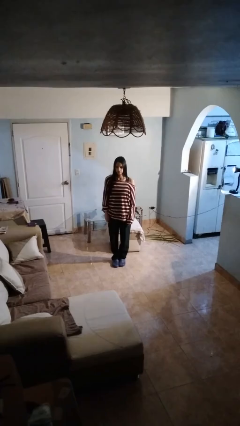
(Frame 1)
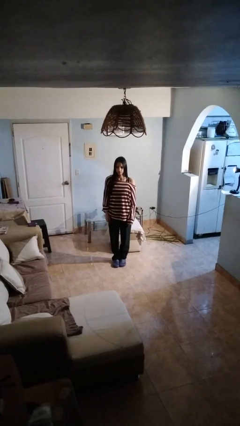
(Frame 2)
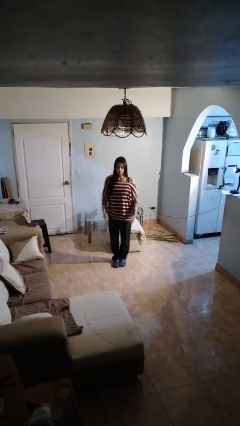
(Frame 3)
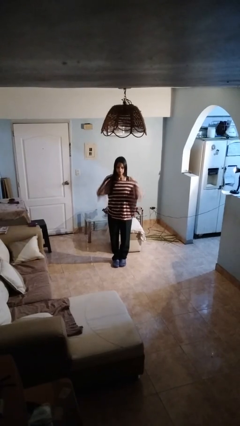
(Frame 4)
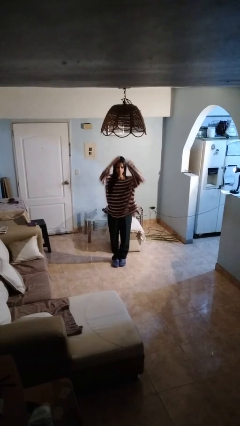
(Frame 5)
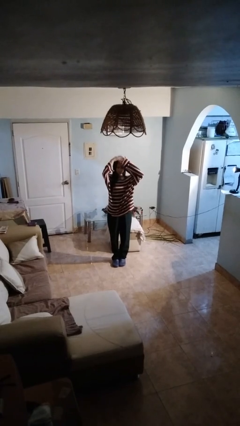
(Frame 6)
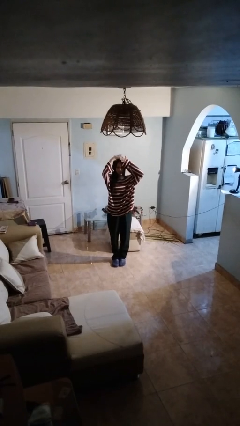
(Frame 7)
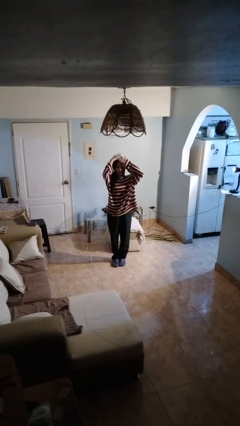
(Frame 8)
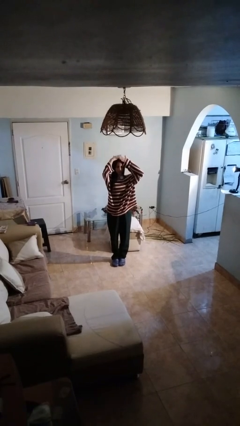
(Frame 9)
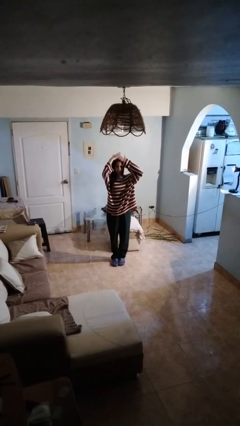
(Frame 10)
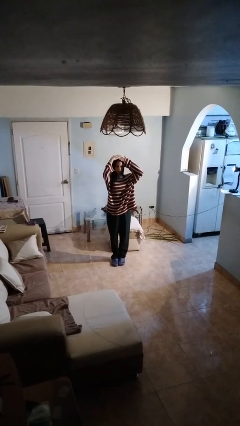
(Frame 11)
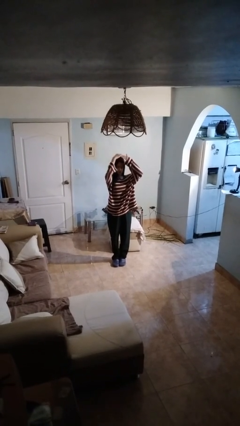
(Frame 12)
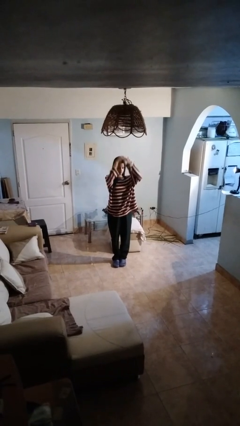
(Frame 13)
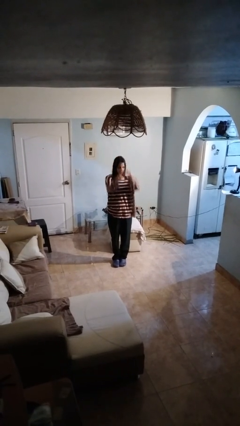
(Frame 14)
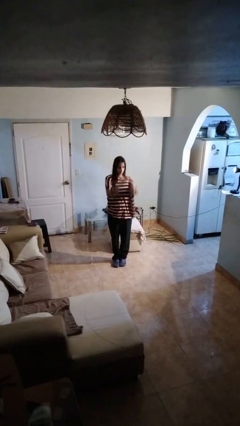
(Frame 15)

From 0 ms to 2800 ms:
person pats head

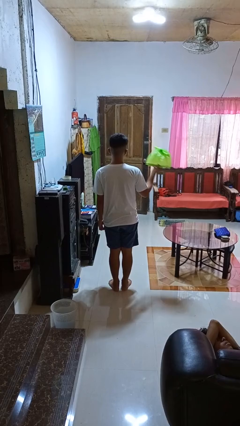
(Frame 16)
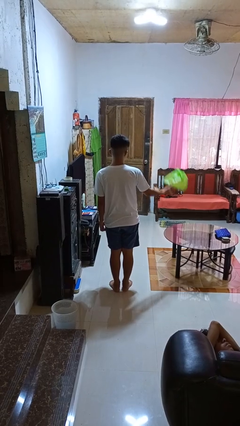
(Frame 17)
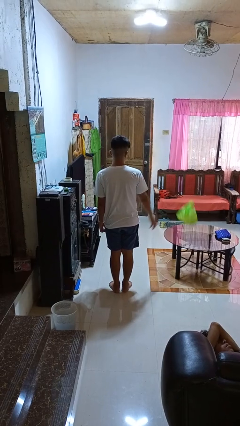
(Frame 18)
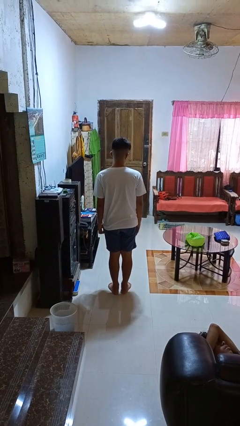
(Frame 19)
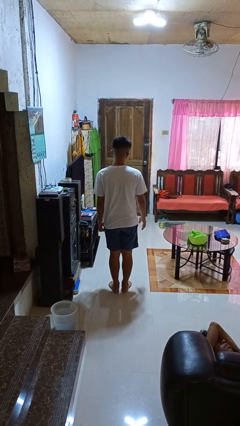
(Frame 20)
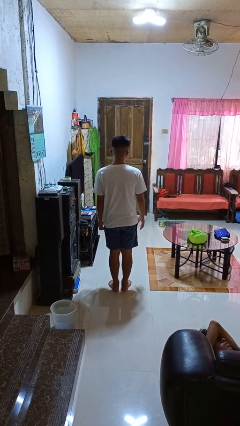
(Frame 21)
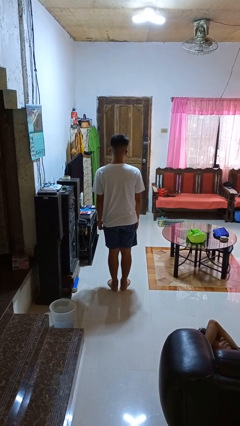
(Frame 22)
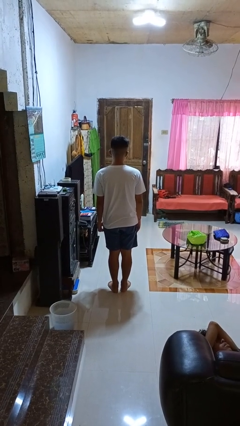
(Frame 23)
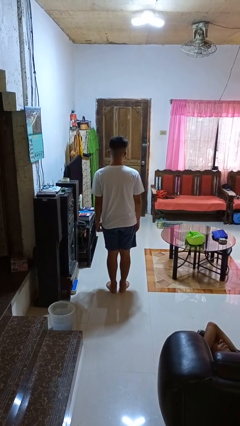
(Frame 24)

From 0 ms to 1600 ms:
person throws object on table

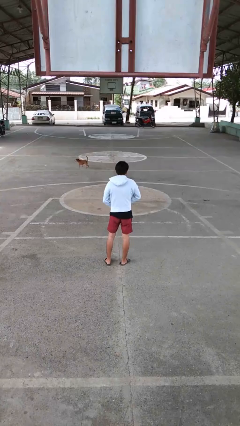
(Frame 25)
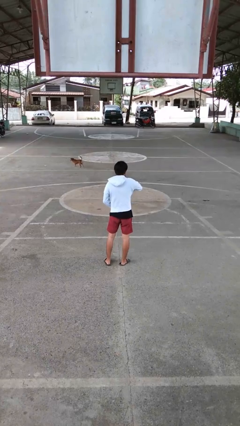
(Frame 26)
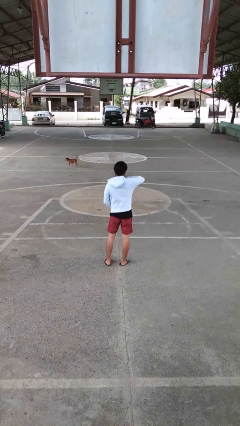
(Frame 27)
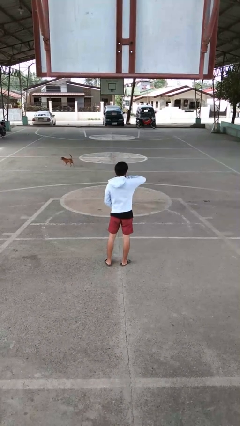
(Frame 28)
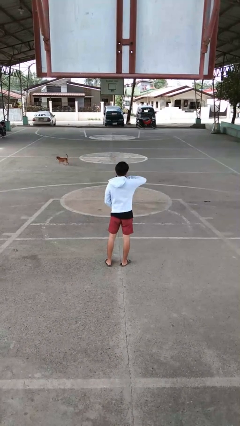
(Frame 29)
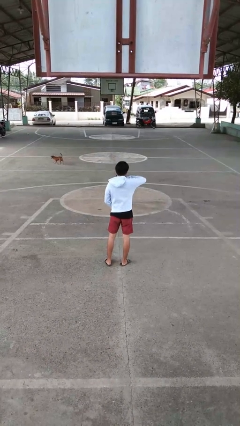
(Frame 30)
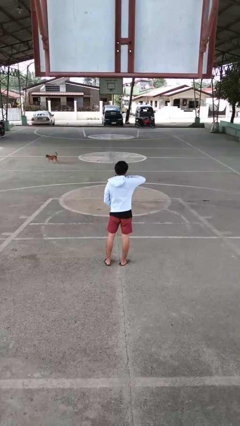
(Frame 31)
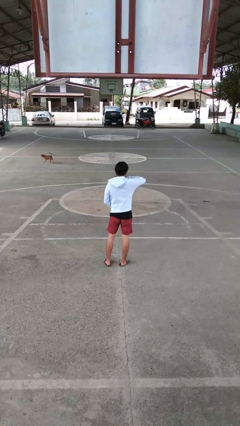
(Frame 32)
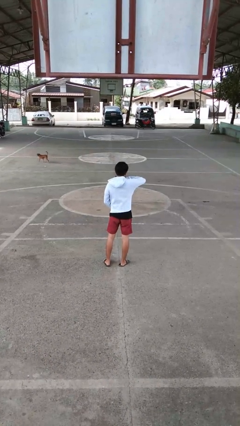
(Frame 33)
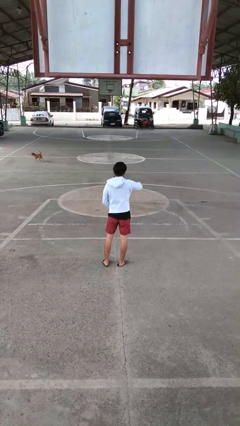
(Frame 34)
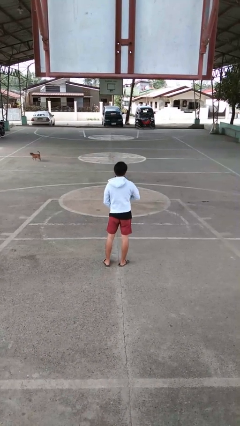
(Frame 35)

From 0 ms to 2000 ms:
person zips up jacket

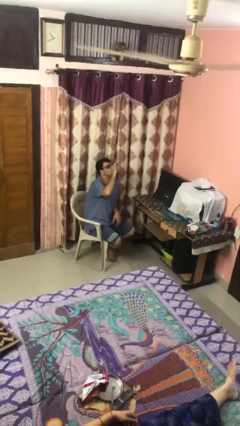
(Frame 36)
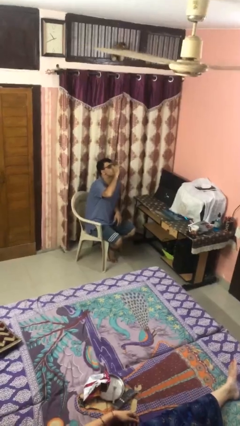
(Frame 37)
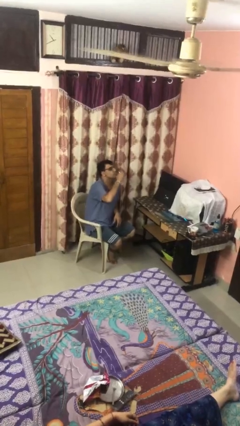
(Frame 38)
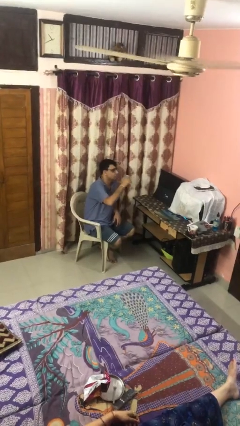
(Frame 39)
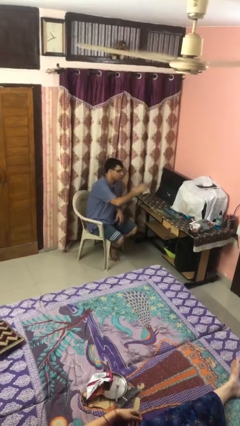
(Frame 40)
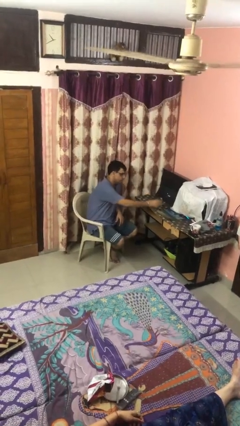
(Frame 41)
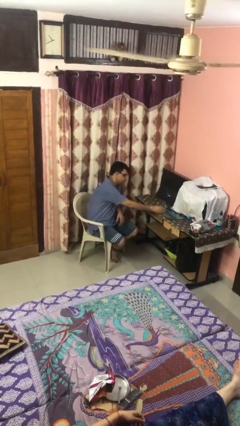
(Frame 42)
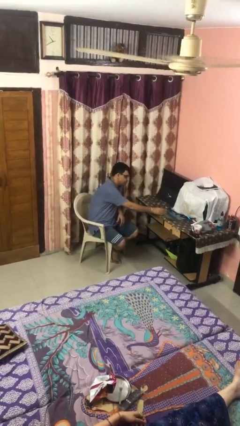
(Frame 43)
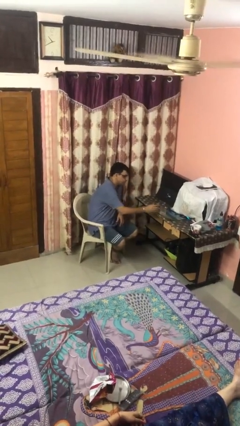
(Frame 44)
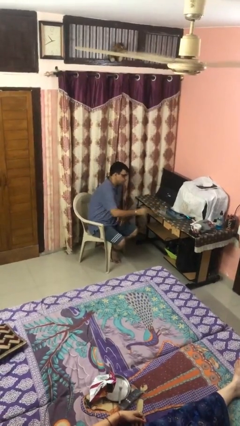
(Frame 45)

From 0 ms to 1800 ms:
person puts down object on table

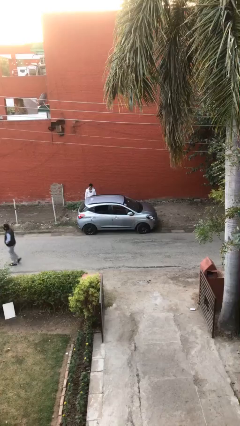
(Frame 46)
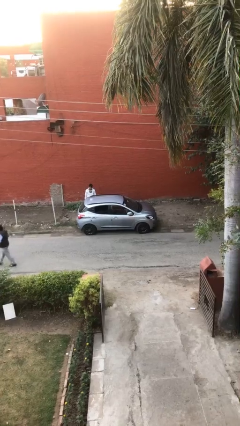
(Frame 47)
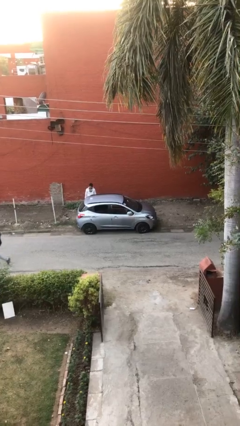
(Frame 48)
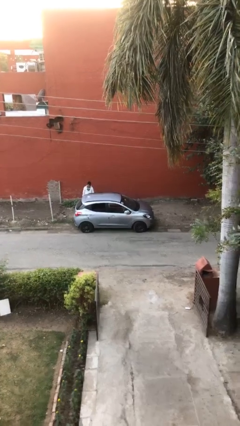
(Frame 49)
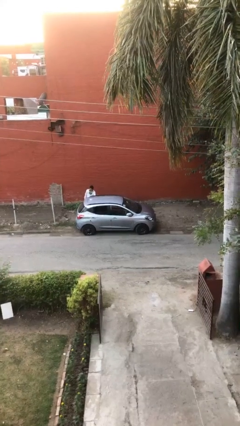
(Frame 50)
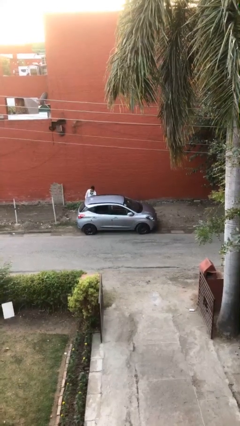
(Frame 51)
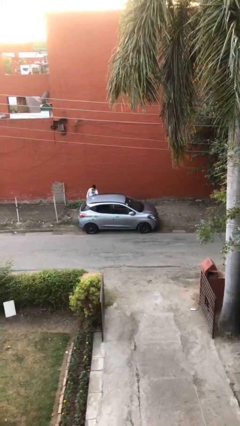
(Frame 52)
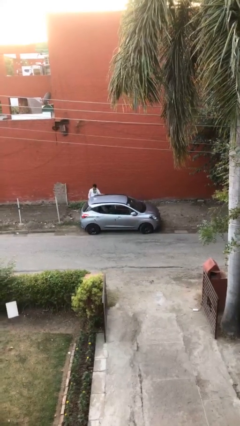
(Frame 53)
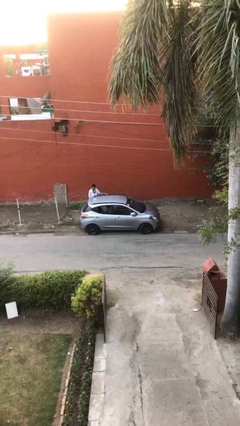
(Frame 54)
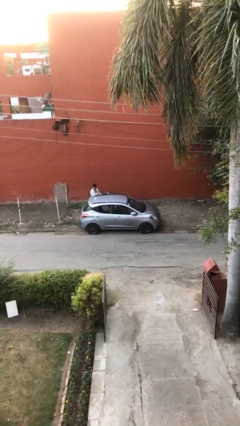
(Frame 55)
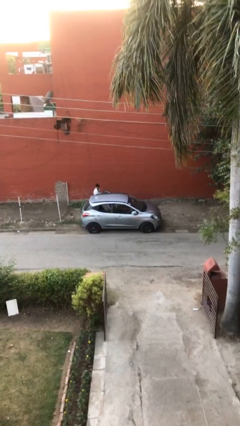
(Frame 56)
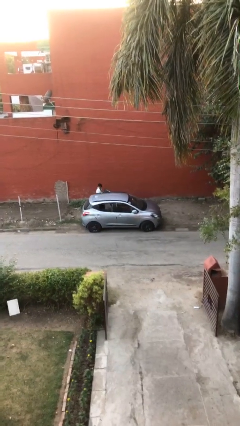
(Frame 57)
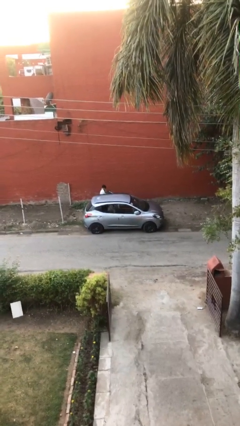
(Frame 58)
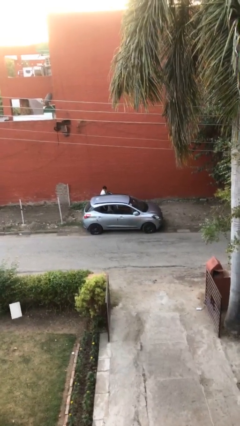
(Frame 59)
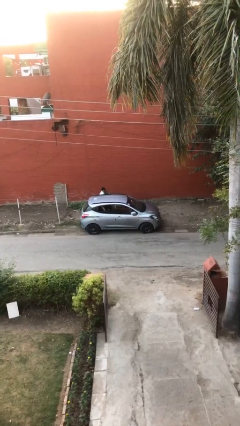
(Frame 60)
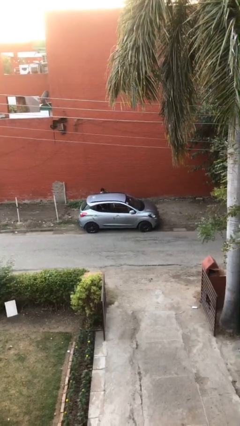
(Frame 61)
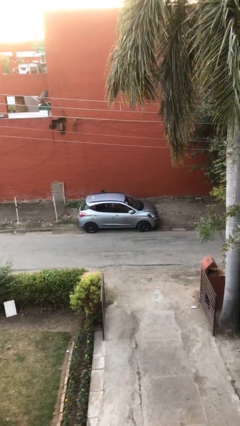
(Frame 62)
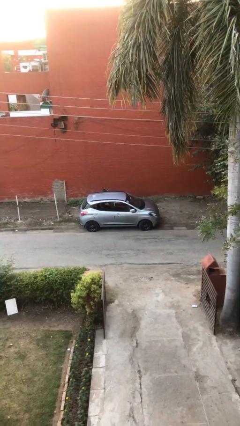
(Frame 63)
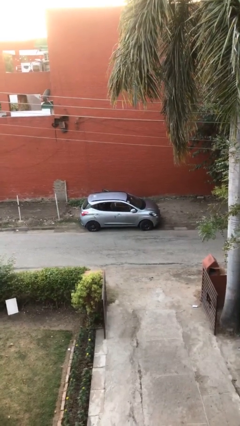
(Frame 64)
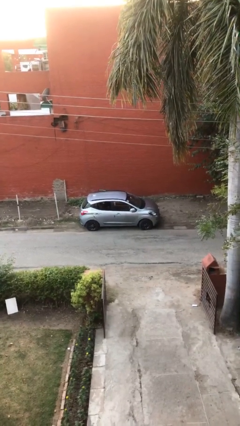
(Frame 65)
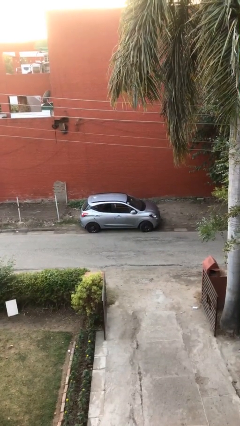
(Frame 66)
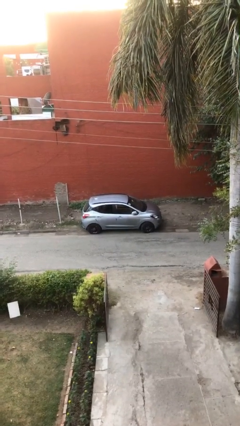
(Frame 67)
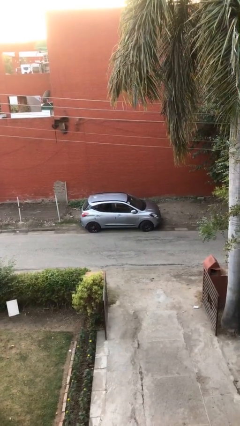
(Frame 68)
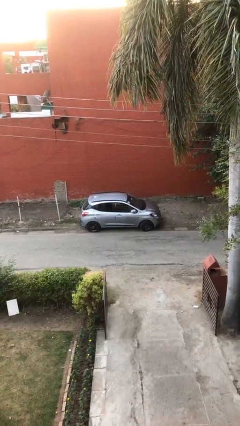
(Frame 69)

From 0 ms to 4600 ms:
car picks up person

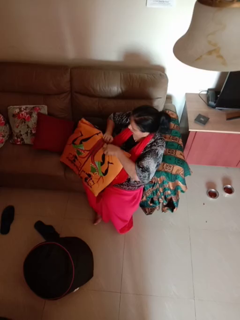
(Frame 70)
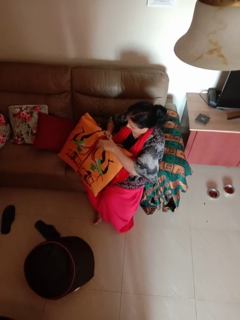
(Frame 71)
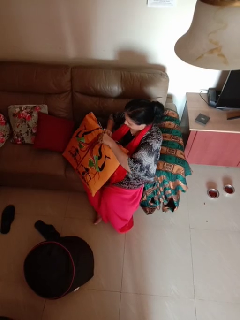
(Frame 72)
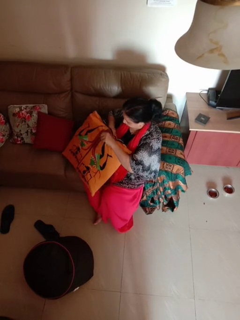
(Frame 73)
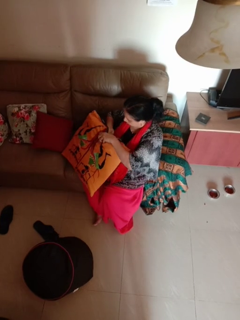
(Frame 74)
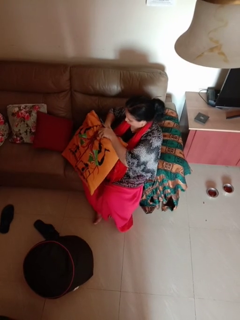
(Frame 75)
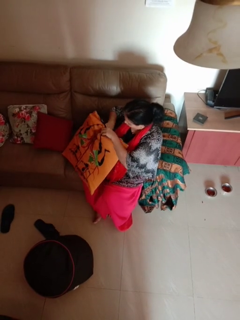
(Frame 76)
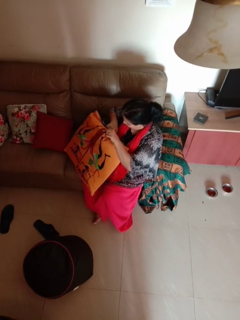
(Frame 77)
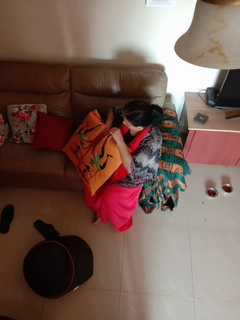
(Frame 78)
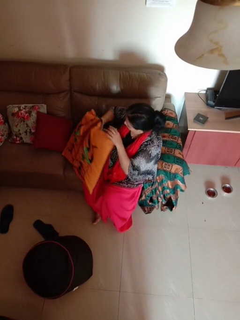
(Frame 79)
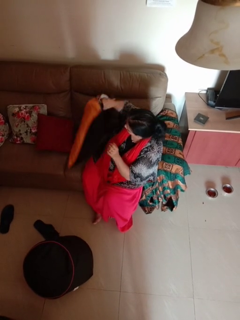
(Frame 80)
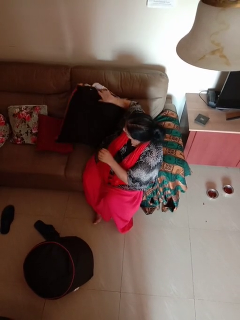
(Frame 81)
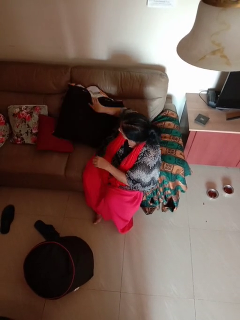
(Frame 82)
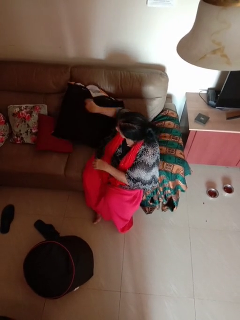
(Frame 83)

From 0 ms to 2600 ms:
person searches in couch

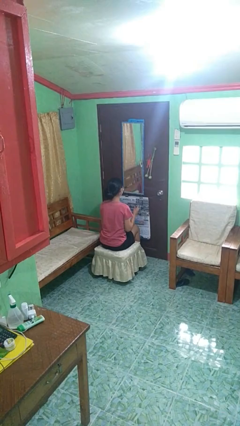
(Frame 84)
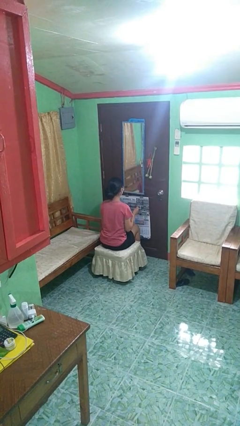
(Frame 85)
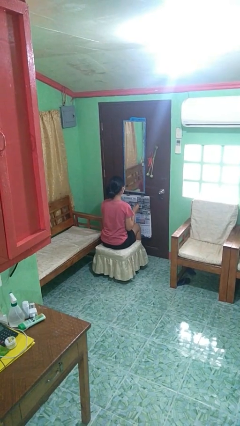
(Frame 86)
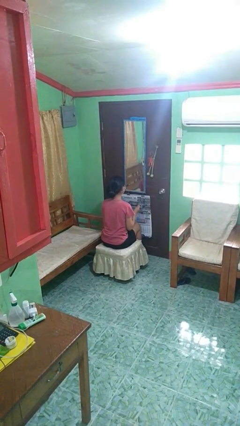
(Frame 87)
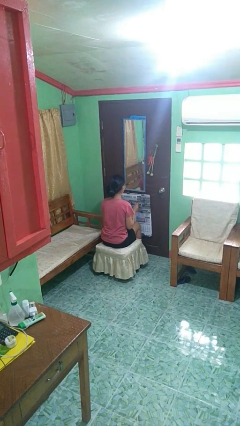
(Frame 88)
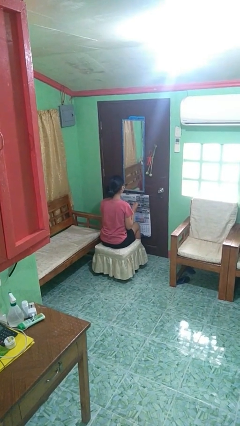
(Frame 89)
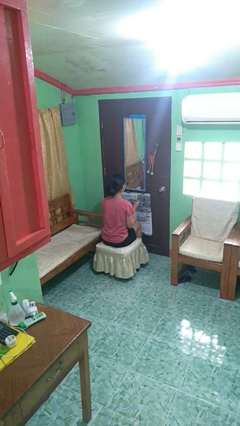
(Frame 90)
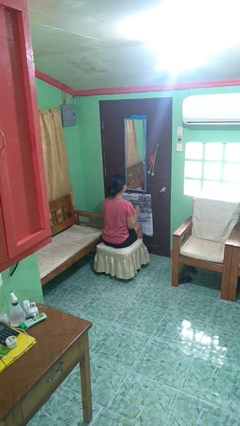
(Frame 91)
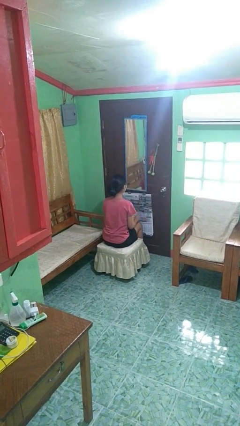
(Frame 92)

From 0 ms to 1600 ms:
person snaps fingers

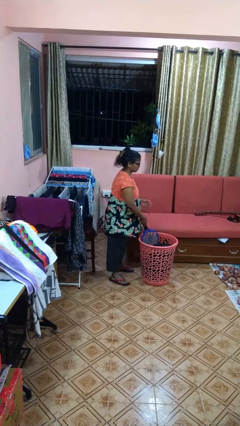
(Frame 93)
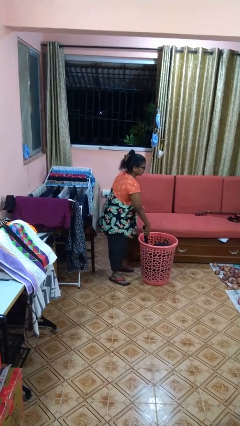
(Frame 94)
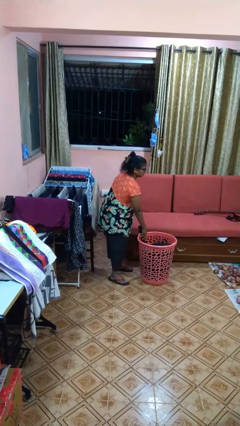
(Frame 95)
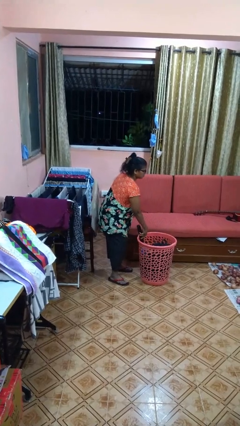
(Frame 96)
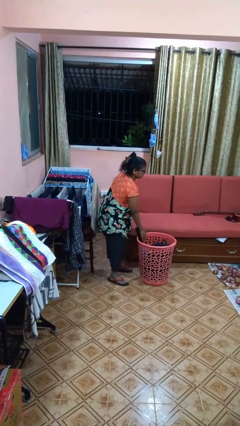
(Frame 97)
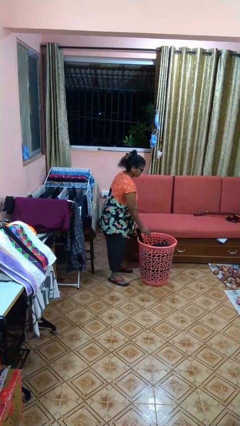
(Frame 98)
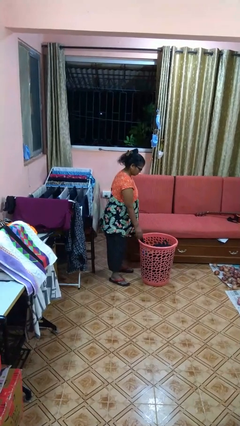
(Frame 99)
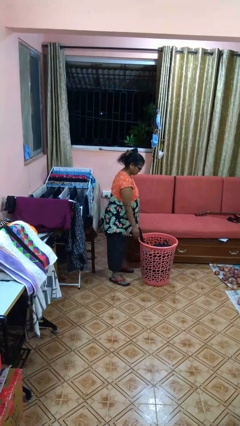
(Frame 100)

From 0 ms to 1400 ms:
person puts object into basket
